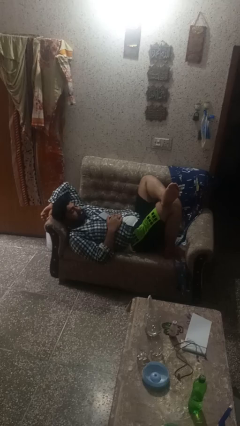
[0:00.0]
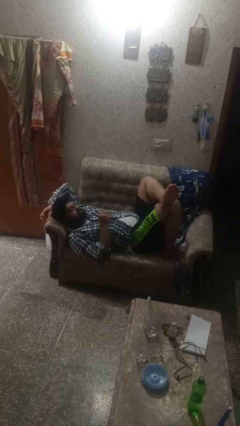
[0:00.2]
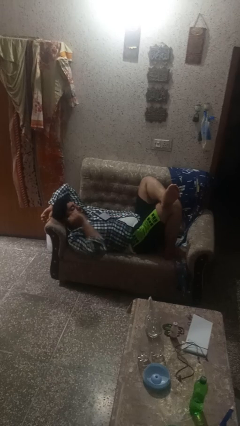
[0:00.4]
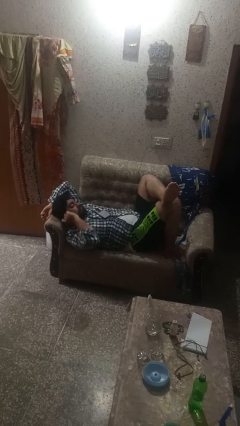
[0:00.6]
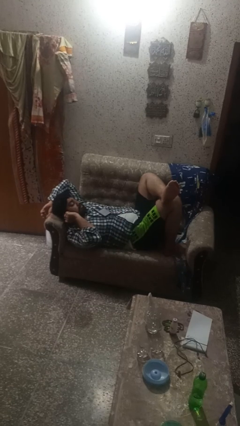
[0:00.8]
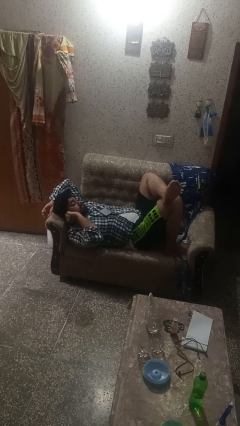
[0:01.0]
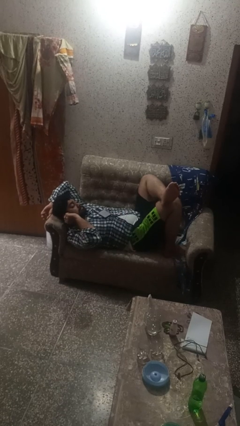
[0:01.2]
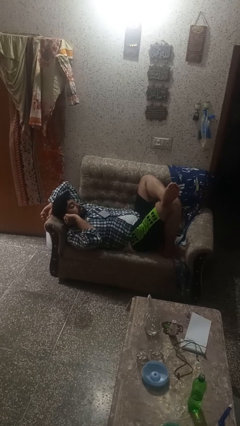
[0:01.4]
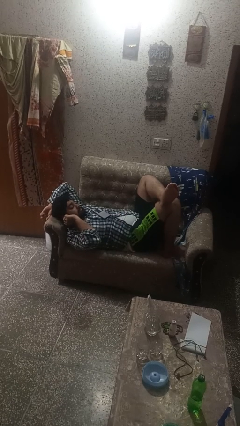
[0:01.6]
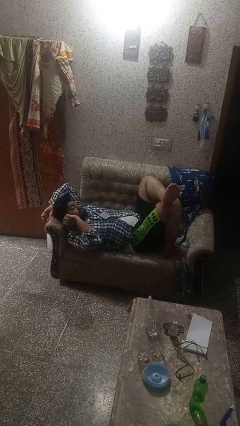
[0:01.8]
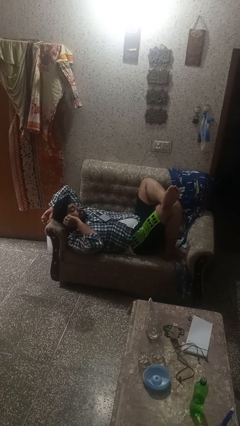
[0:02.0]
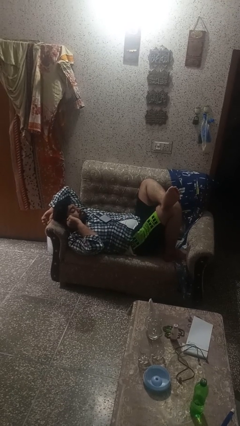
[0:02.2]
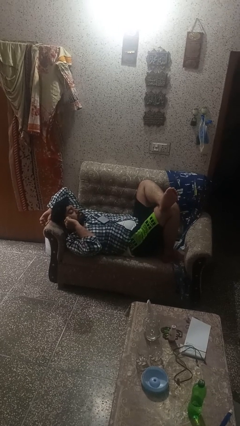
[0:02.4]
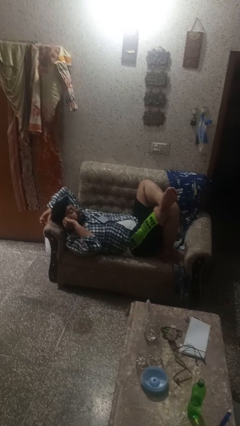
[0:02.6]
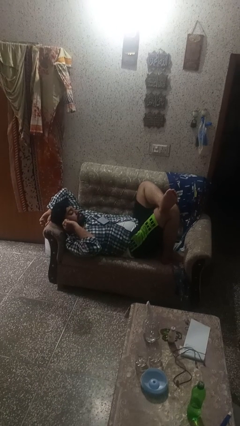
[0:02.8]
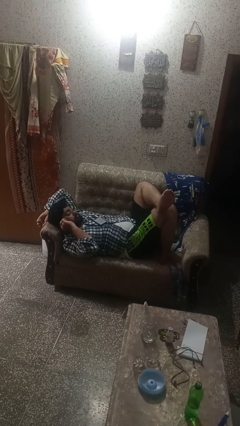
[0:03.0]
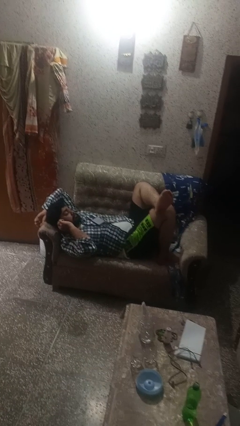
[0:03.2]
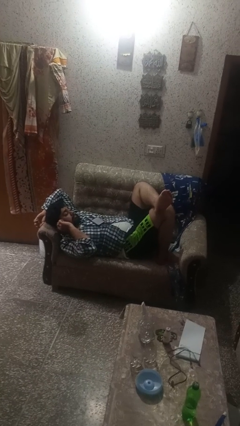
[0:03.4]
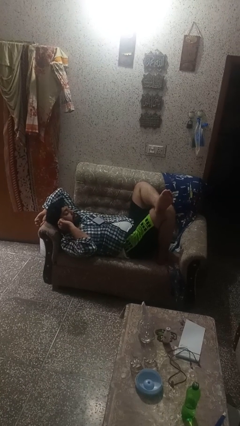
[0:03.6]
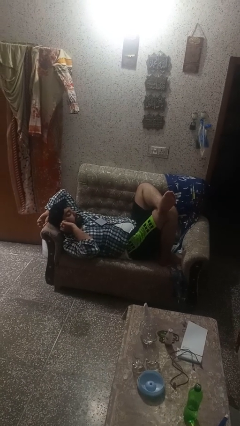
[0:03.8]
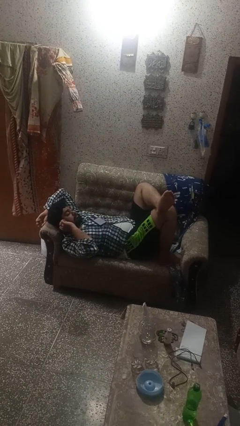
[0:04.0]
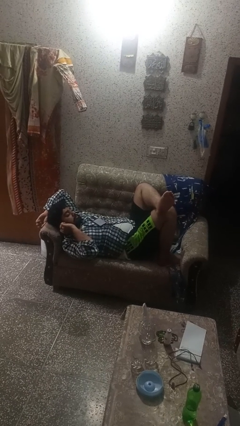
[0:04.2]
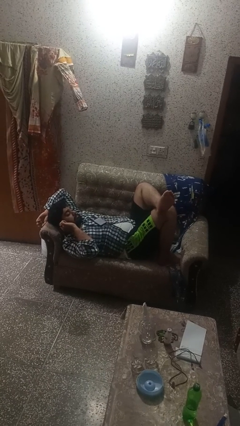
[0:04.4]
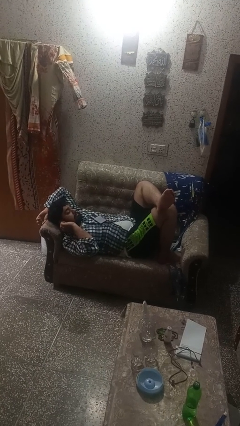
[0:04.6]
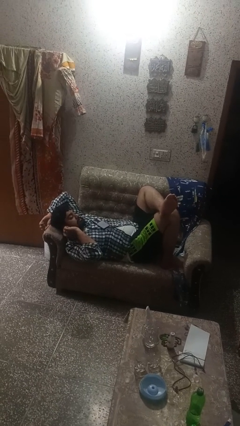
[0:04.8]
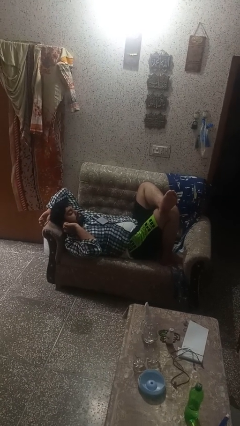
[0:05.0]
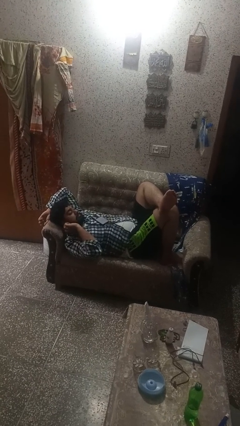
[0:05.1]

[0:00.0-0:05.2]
person touches earlobe

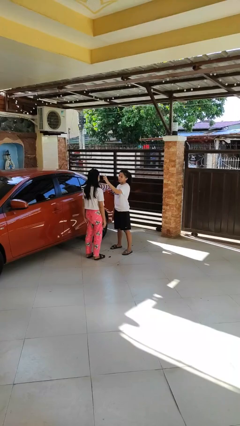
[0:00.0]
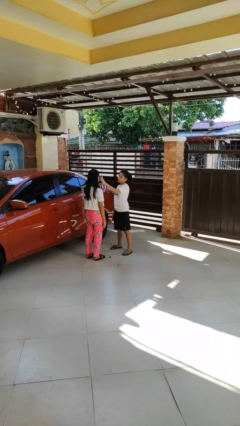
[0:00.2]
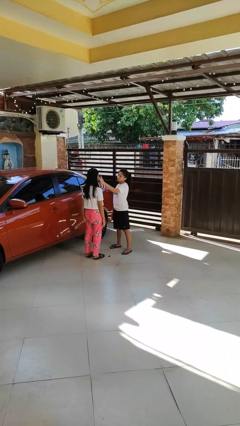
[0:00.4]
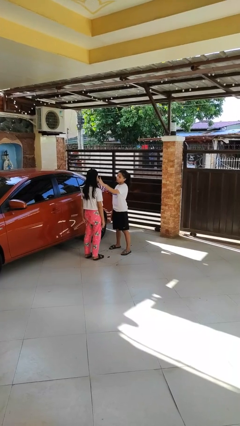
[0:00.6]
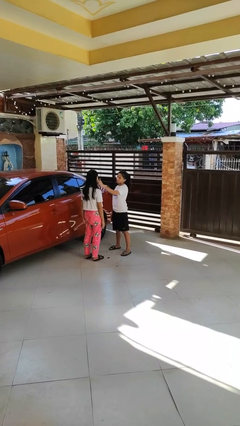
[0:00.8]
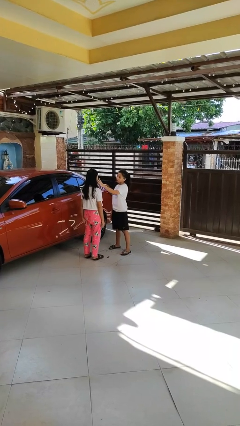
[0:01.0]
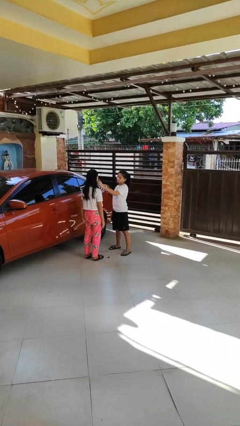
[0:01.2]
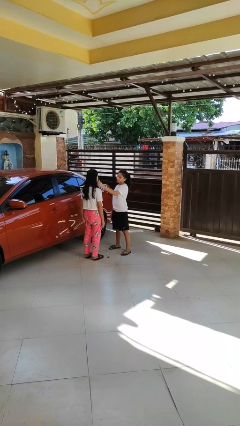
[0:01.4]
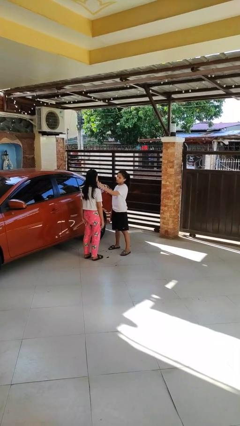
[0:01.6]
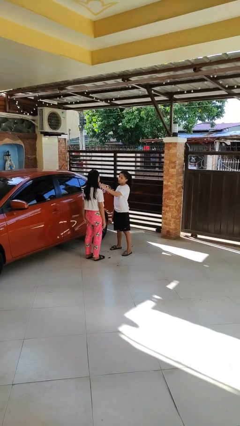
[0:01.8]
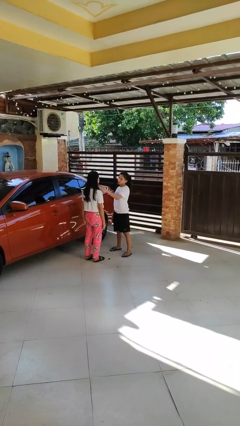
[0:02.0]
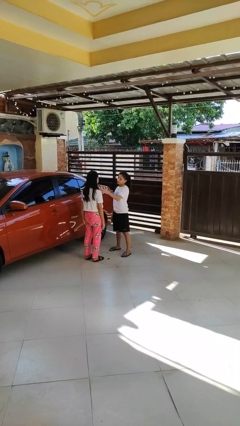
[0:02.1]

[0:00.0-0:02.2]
person touches face of person

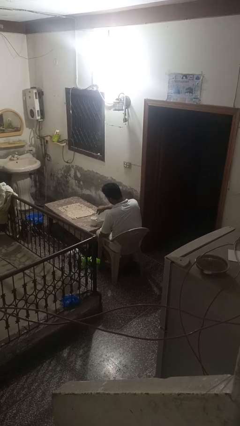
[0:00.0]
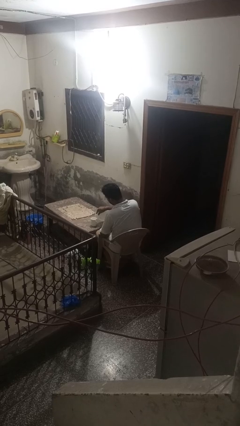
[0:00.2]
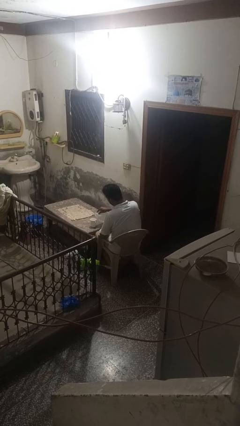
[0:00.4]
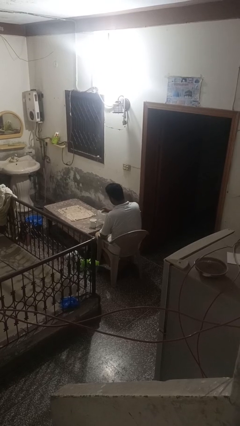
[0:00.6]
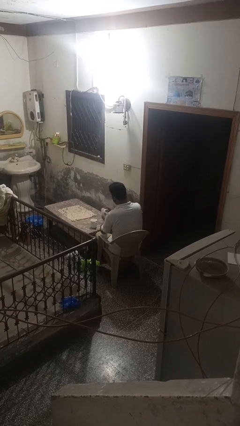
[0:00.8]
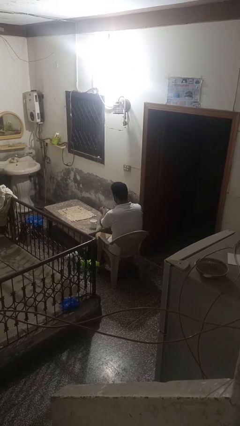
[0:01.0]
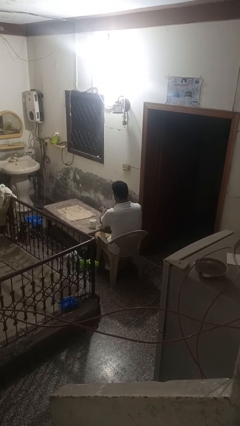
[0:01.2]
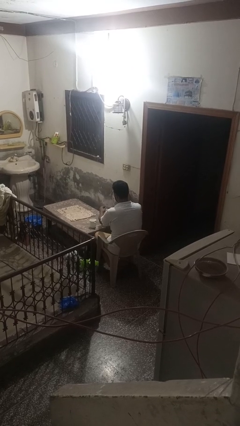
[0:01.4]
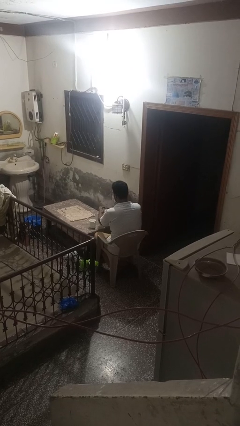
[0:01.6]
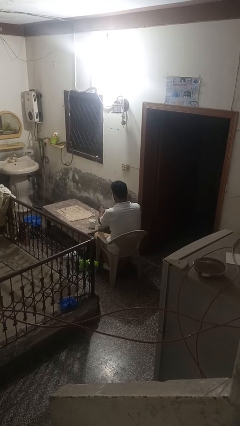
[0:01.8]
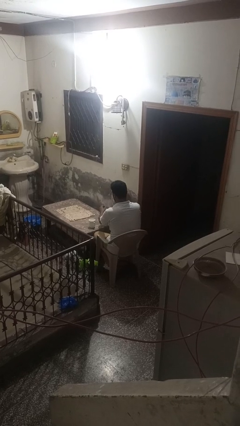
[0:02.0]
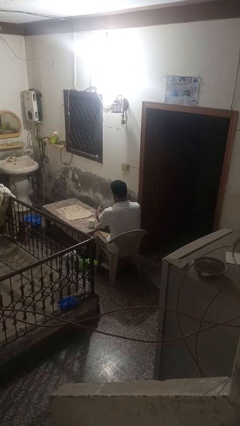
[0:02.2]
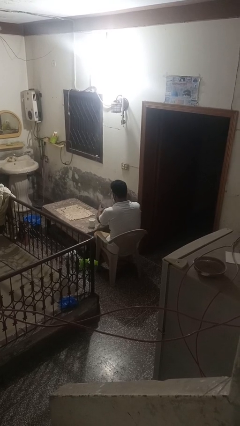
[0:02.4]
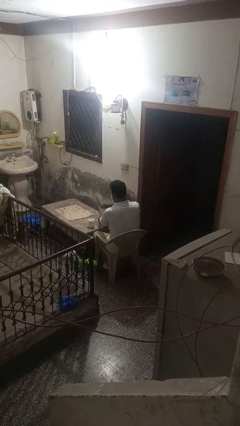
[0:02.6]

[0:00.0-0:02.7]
person screws lid to bottle

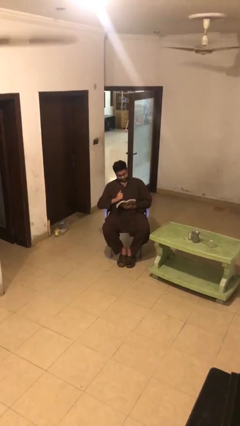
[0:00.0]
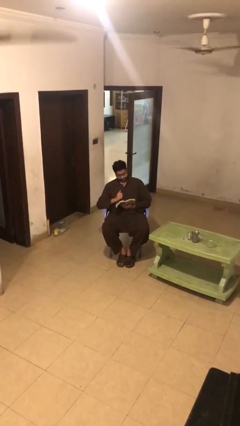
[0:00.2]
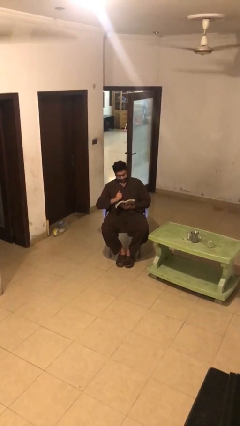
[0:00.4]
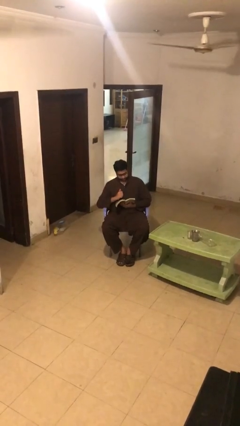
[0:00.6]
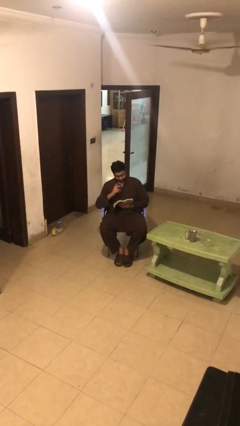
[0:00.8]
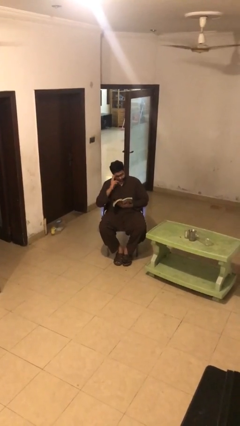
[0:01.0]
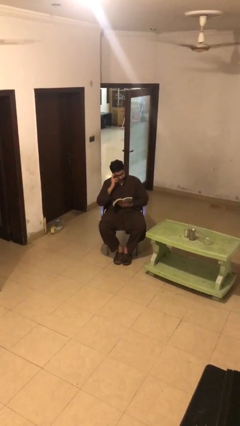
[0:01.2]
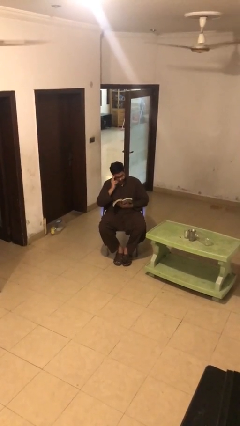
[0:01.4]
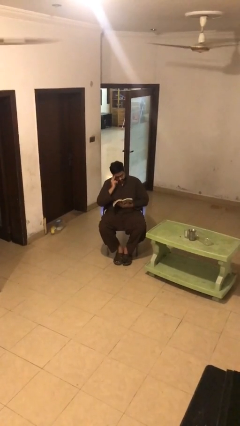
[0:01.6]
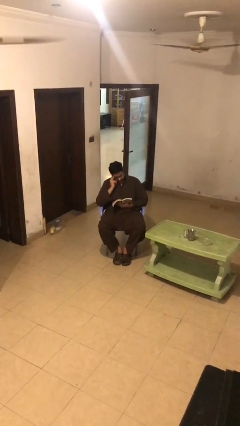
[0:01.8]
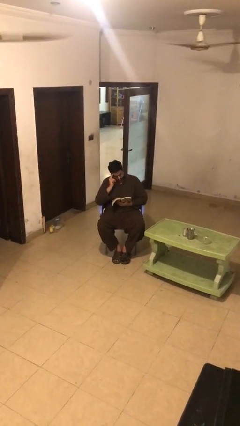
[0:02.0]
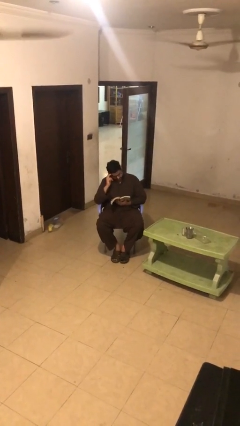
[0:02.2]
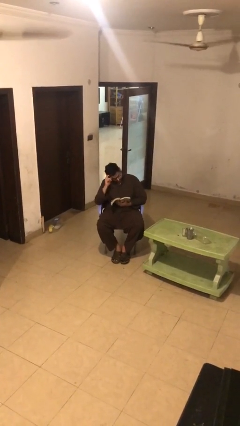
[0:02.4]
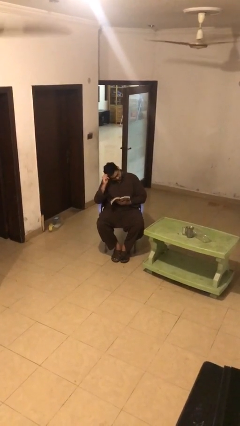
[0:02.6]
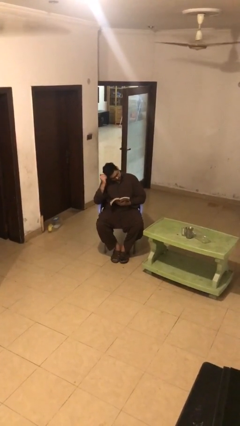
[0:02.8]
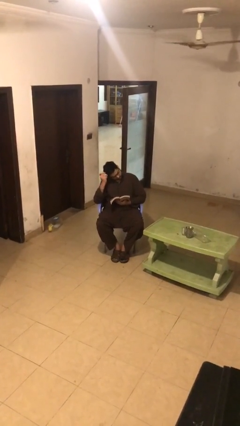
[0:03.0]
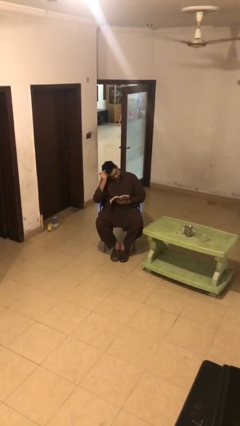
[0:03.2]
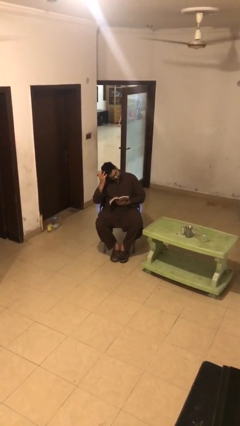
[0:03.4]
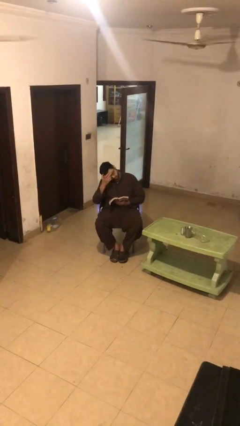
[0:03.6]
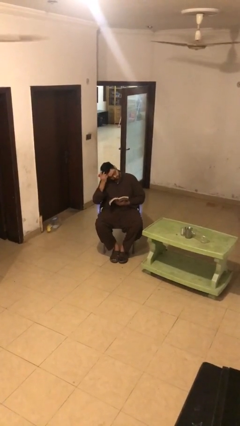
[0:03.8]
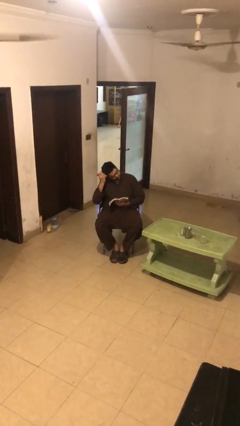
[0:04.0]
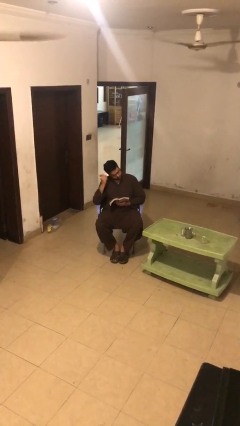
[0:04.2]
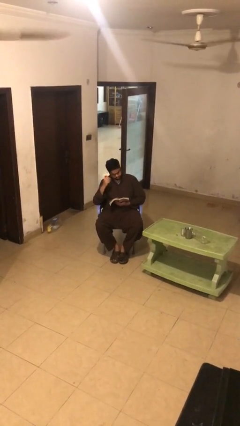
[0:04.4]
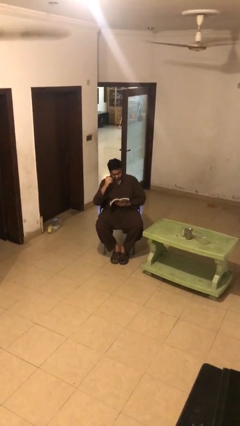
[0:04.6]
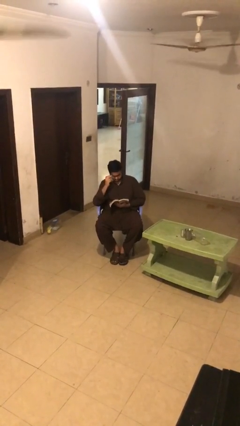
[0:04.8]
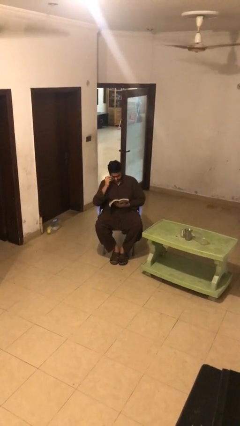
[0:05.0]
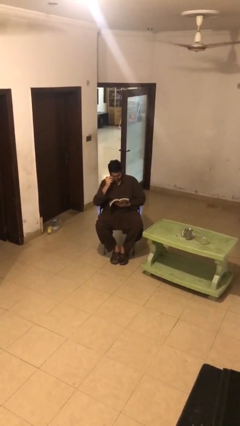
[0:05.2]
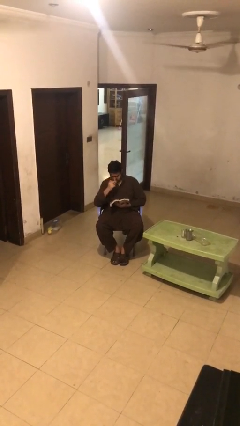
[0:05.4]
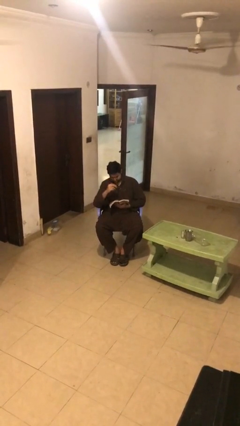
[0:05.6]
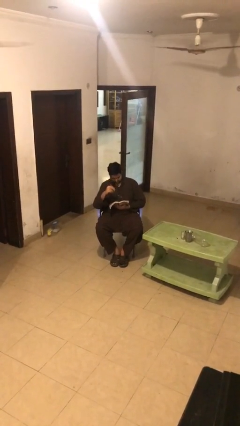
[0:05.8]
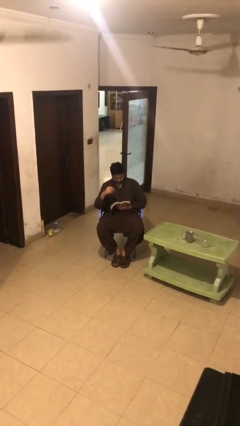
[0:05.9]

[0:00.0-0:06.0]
person reads document

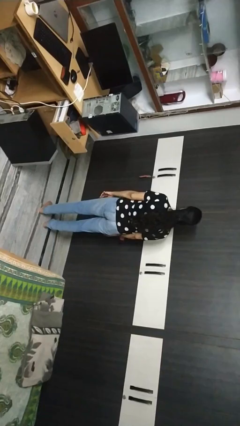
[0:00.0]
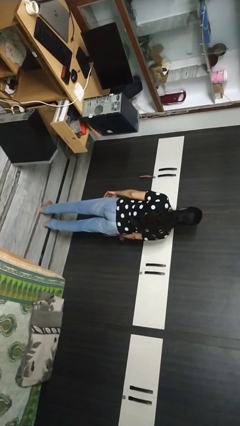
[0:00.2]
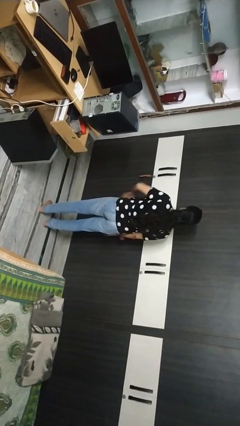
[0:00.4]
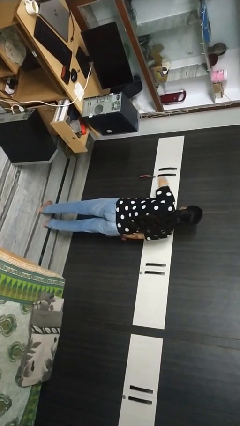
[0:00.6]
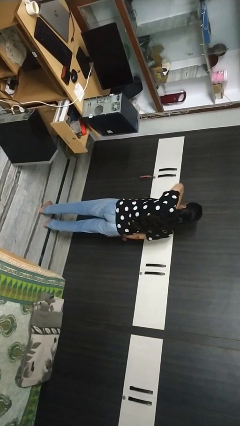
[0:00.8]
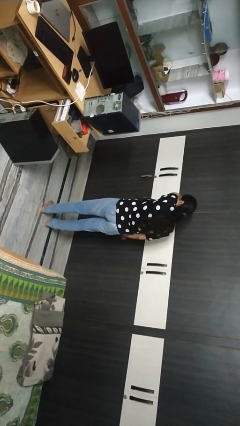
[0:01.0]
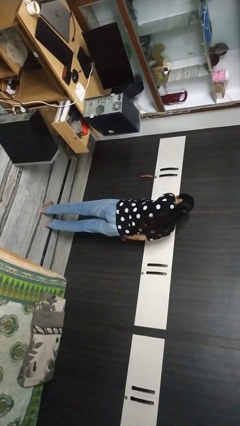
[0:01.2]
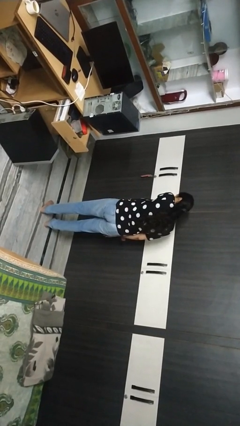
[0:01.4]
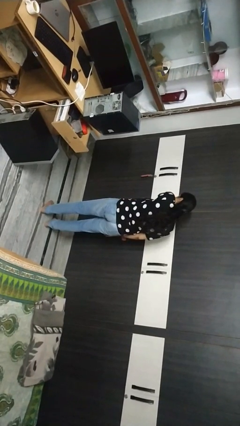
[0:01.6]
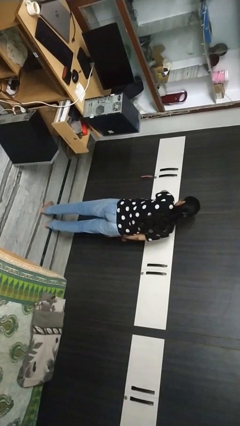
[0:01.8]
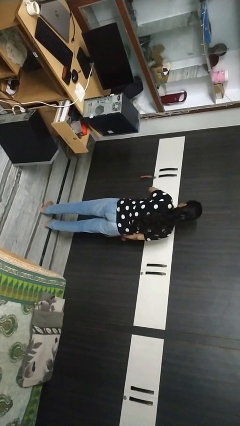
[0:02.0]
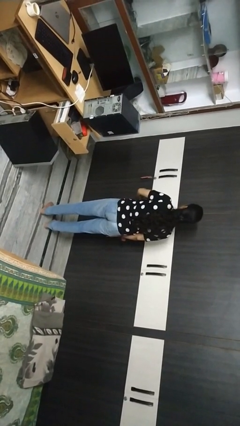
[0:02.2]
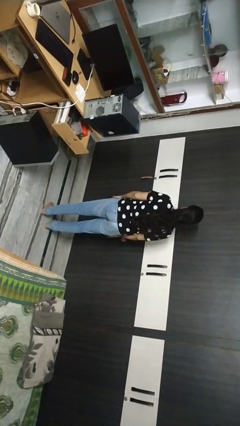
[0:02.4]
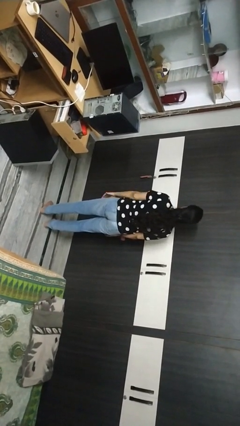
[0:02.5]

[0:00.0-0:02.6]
person sneezes into arm
